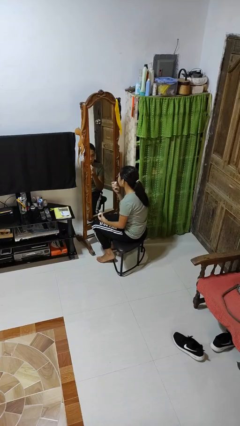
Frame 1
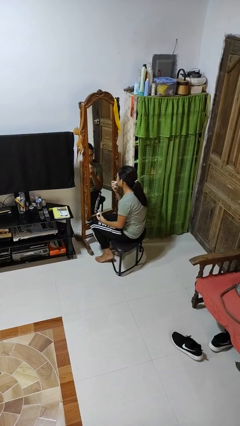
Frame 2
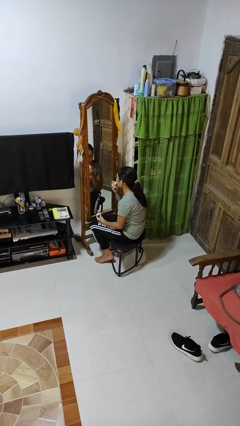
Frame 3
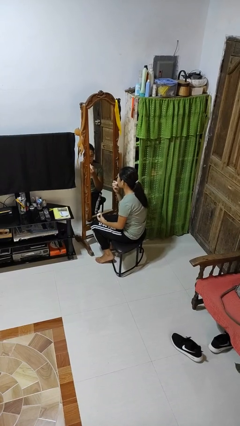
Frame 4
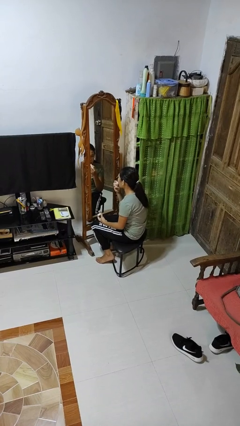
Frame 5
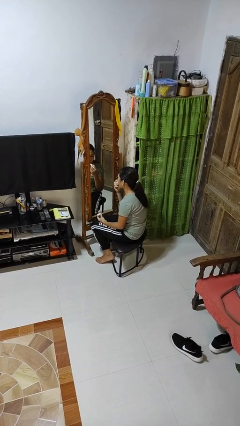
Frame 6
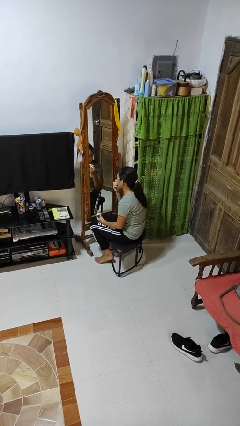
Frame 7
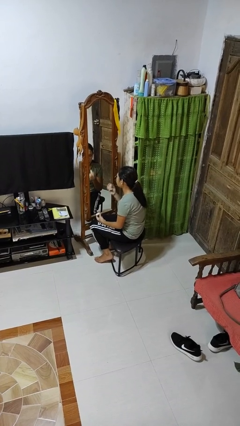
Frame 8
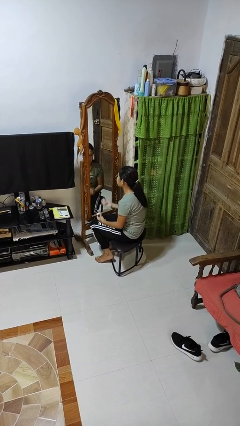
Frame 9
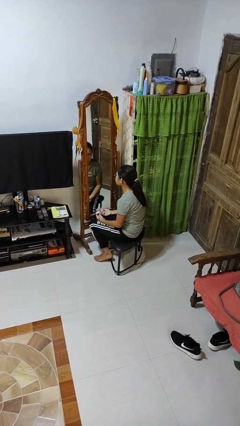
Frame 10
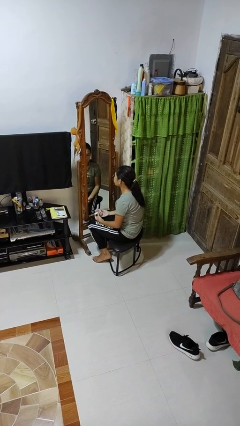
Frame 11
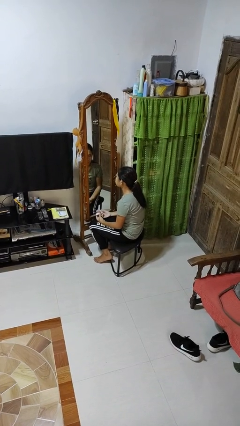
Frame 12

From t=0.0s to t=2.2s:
person applies lip makeup

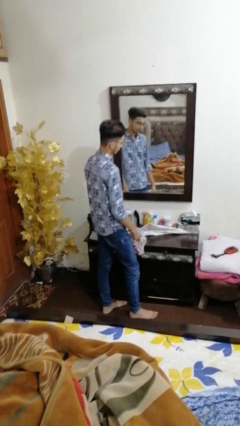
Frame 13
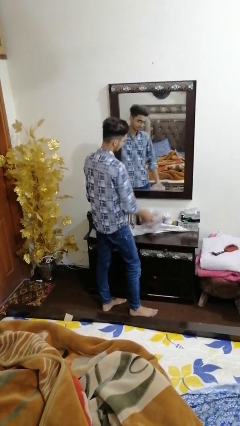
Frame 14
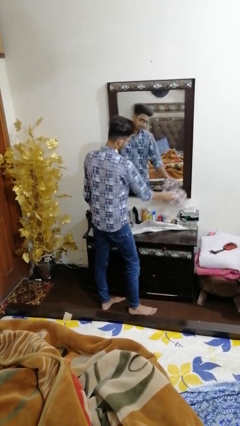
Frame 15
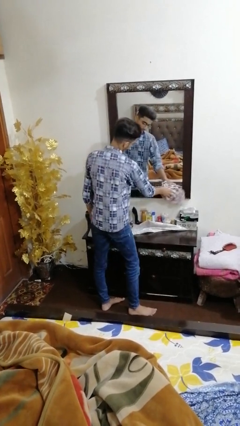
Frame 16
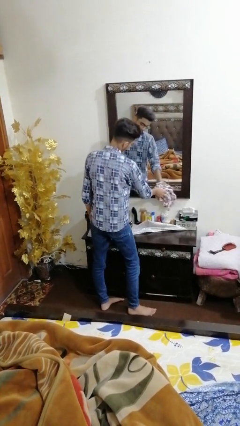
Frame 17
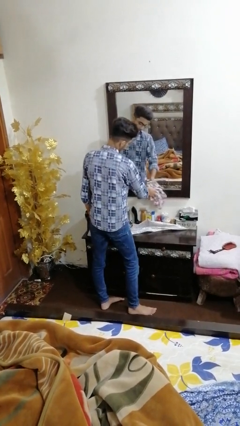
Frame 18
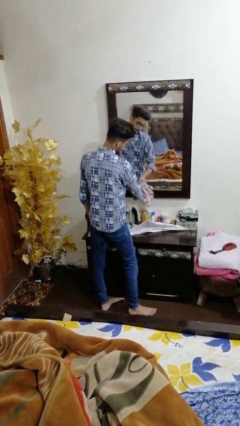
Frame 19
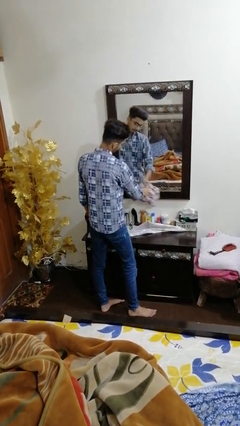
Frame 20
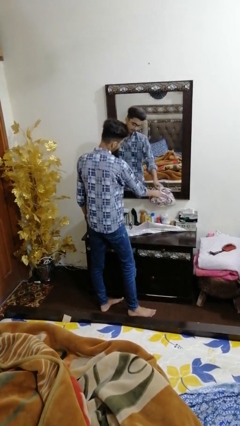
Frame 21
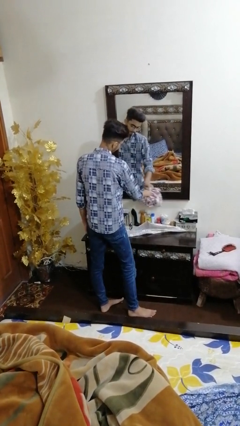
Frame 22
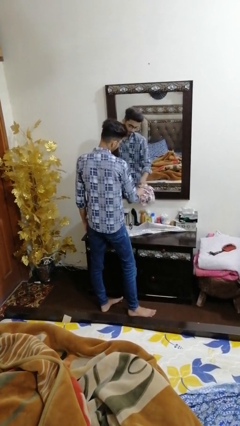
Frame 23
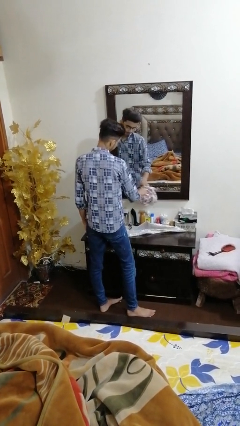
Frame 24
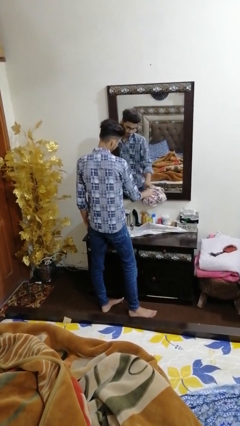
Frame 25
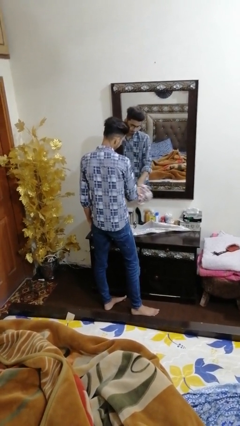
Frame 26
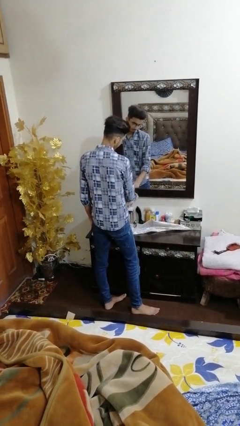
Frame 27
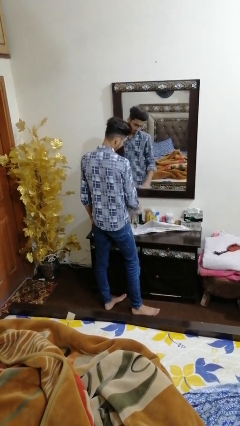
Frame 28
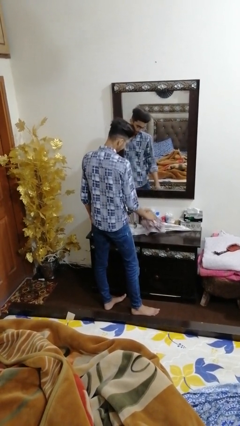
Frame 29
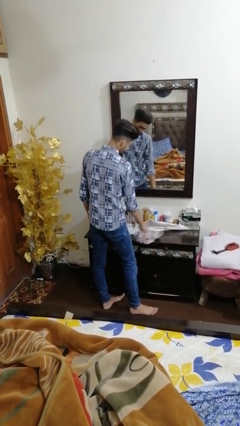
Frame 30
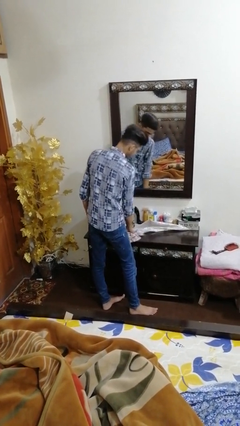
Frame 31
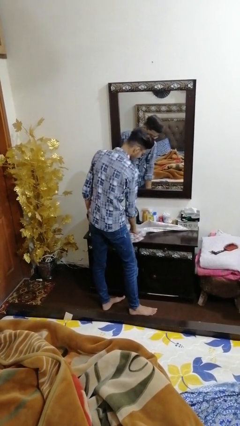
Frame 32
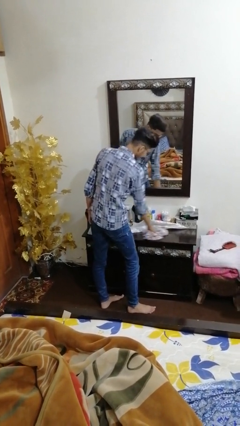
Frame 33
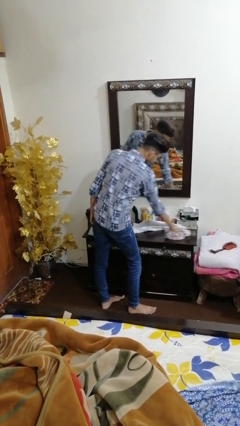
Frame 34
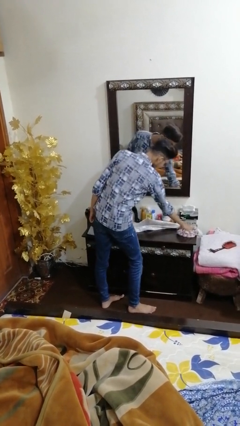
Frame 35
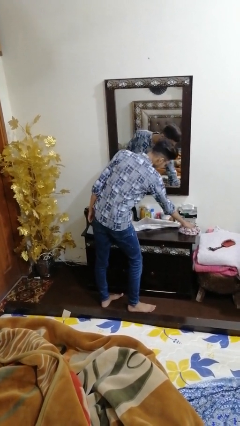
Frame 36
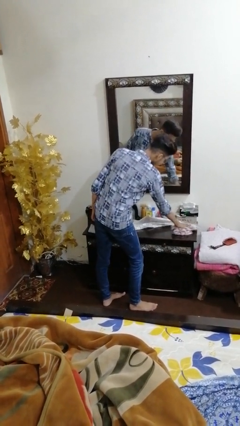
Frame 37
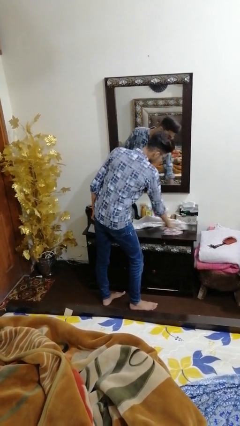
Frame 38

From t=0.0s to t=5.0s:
person cleans table with rag

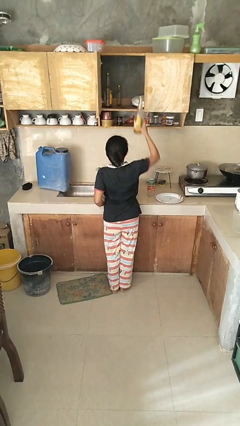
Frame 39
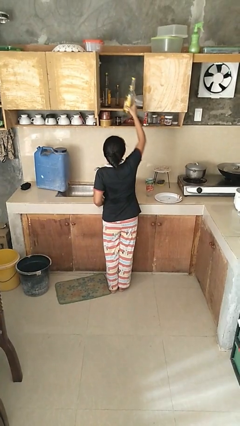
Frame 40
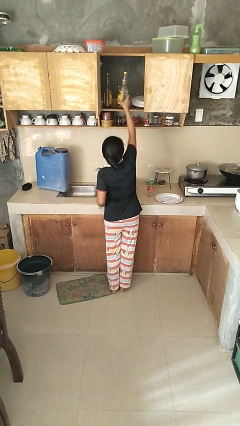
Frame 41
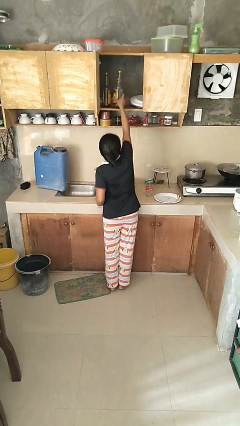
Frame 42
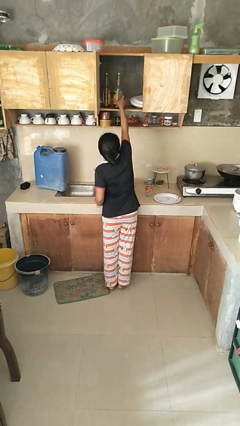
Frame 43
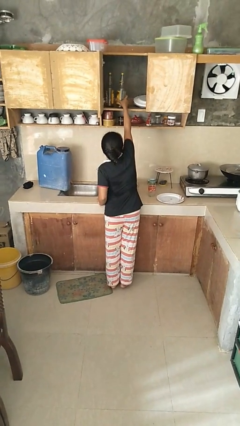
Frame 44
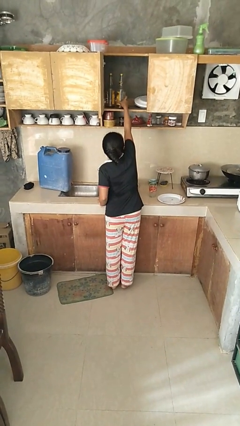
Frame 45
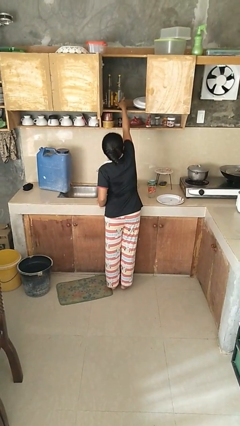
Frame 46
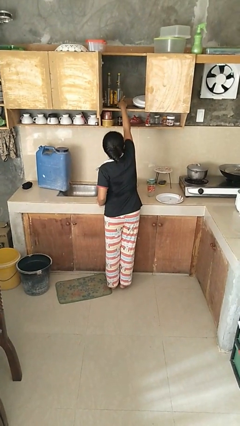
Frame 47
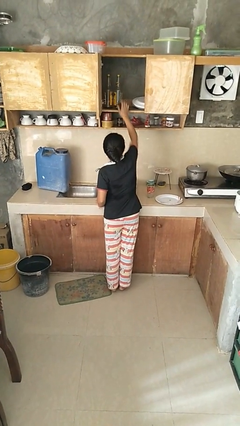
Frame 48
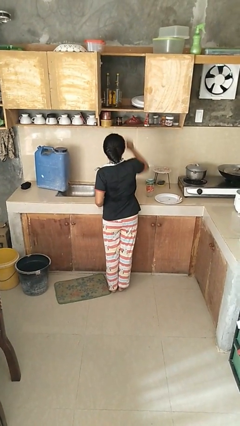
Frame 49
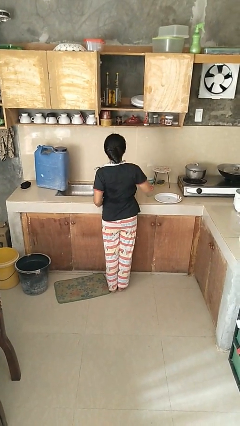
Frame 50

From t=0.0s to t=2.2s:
person puts object in cabinet

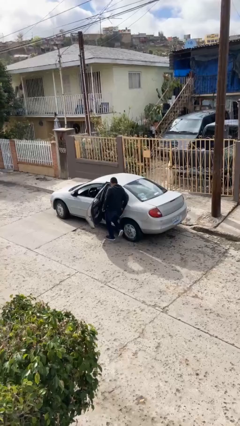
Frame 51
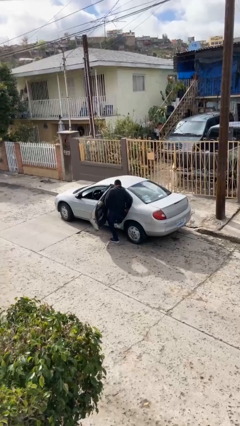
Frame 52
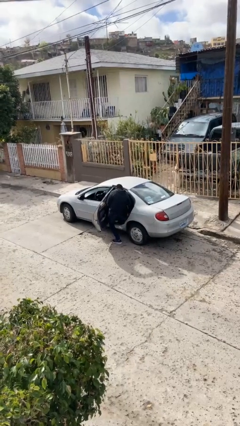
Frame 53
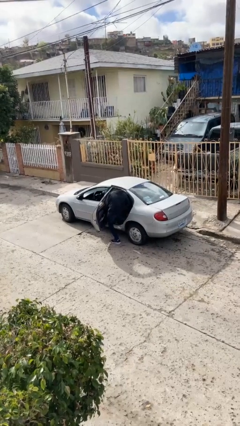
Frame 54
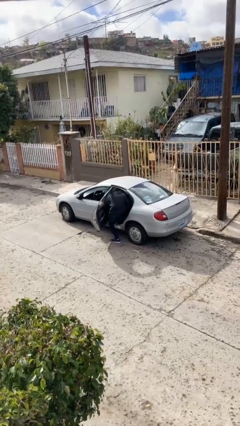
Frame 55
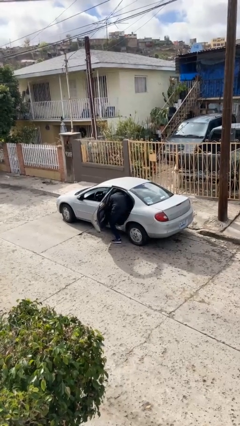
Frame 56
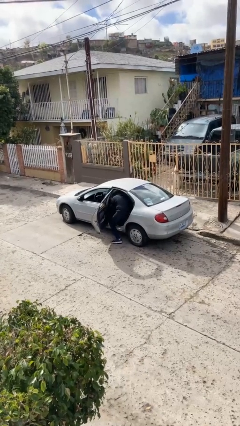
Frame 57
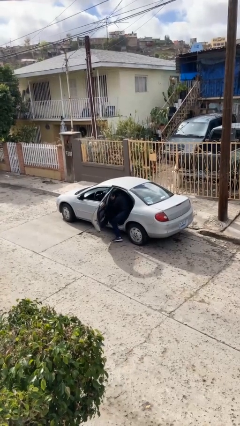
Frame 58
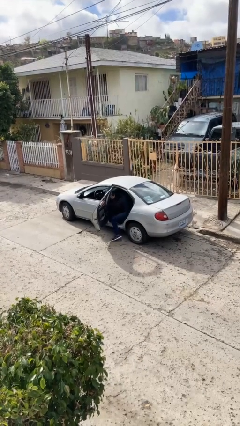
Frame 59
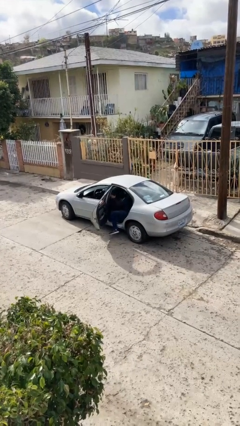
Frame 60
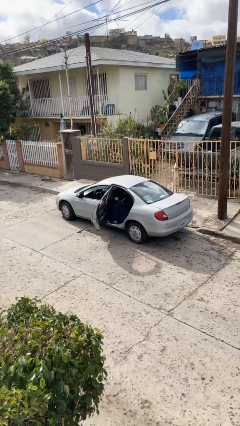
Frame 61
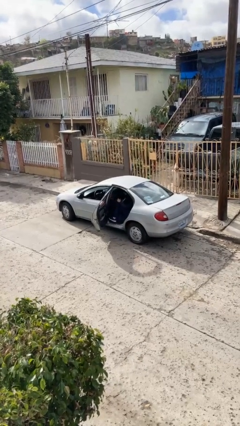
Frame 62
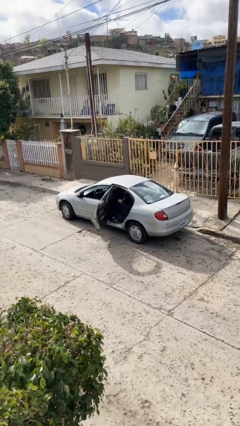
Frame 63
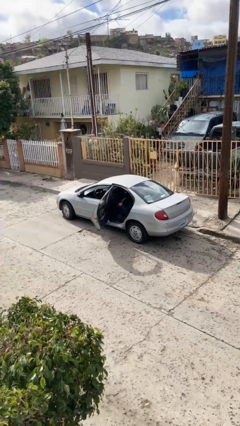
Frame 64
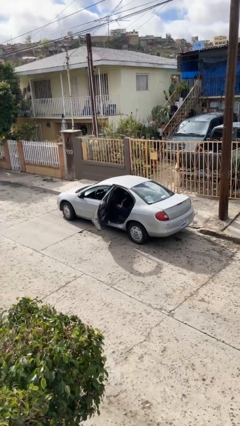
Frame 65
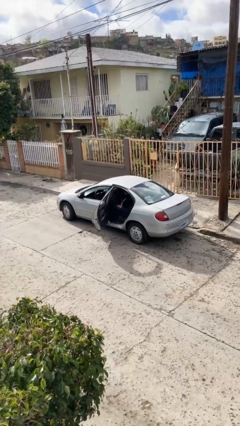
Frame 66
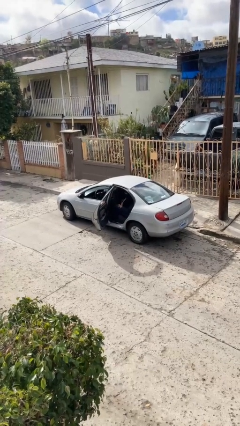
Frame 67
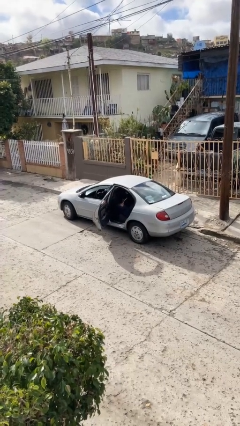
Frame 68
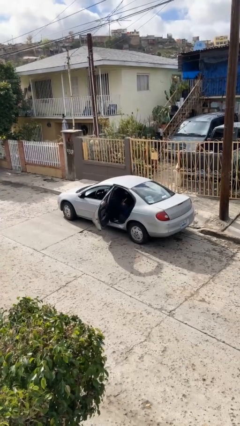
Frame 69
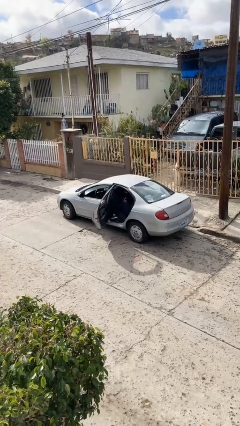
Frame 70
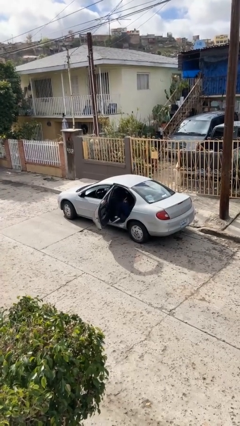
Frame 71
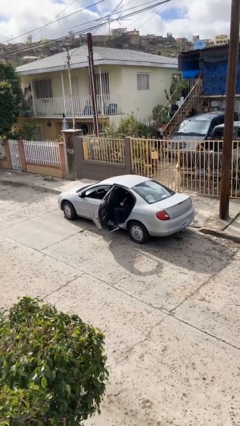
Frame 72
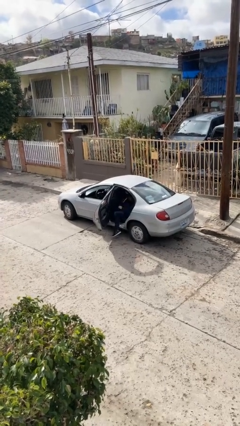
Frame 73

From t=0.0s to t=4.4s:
person enters car

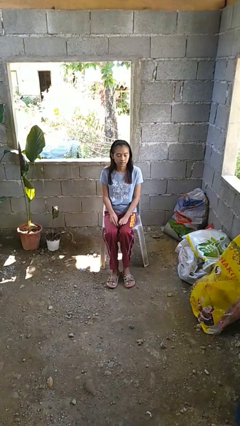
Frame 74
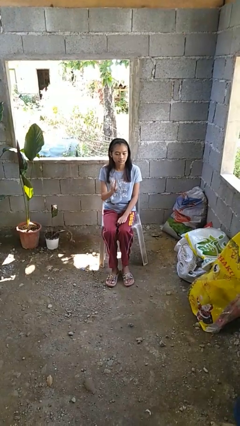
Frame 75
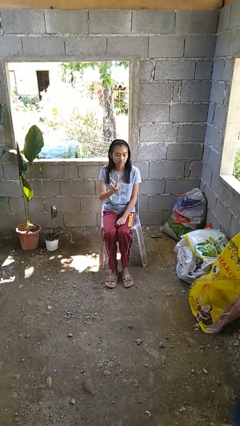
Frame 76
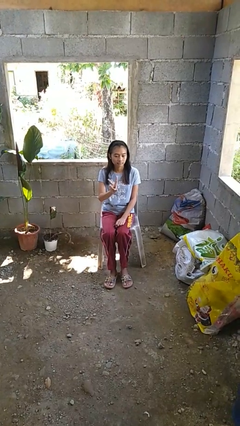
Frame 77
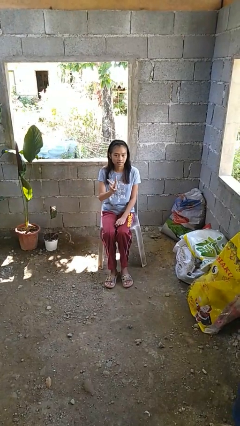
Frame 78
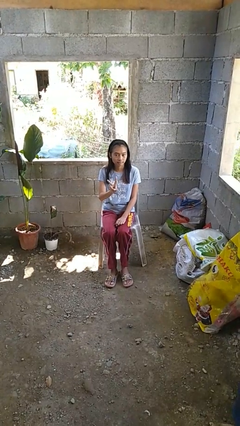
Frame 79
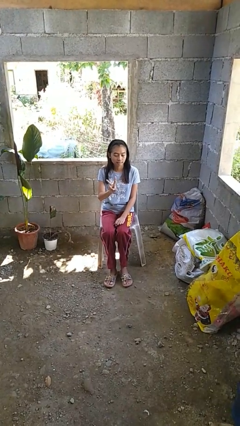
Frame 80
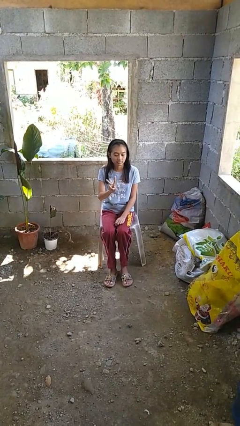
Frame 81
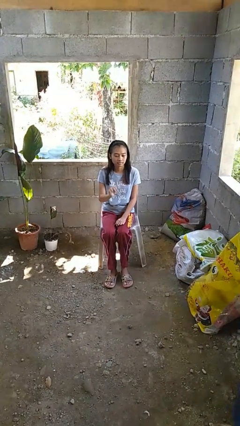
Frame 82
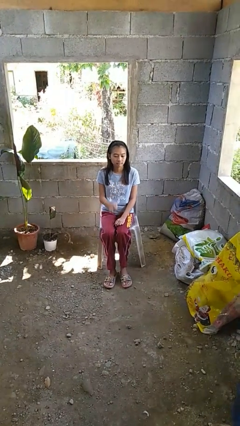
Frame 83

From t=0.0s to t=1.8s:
person gestures peace

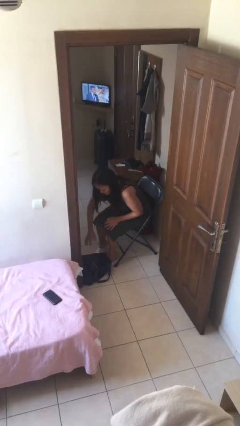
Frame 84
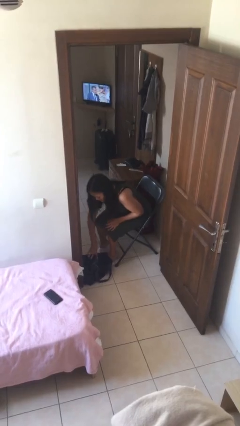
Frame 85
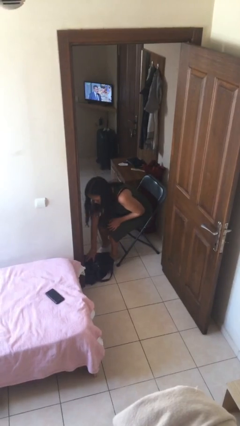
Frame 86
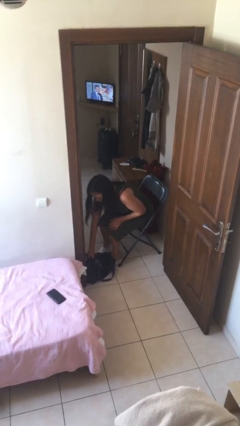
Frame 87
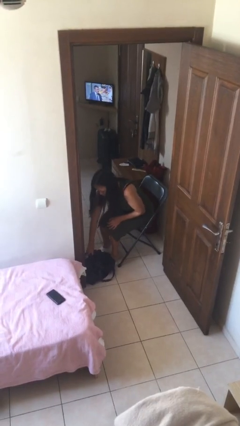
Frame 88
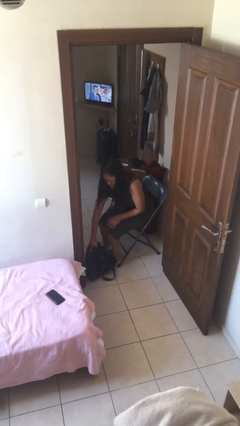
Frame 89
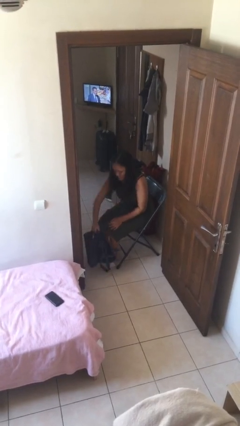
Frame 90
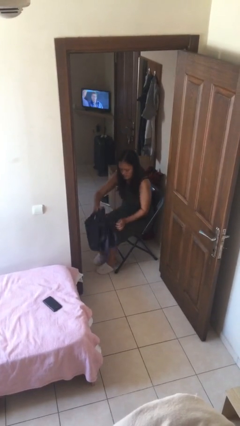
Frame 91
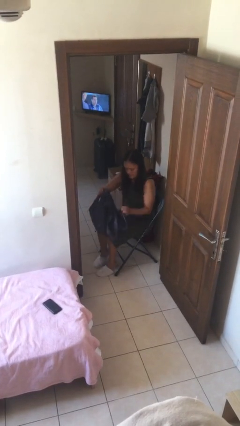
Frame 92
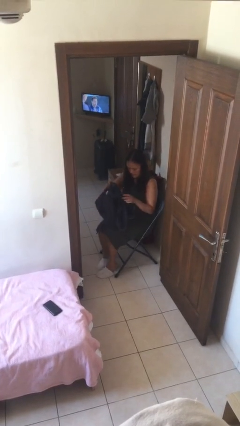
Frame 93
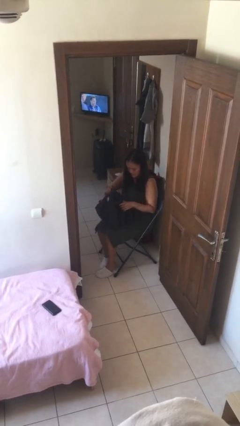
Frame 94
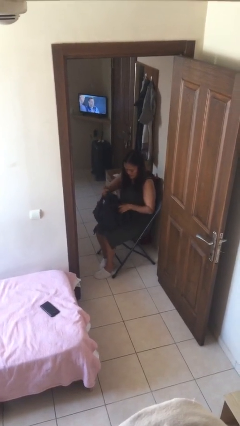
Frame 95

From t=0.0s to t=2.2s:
person picks up object from floor
